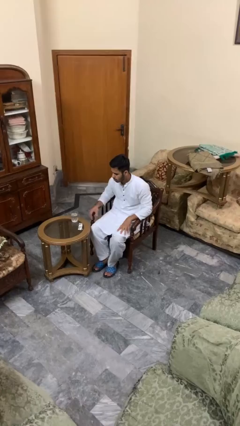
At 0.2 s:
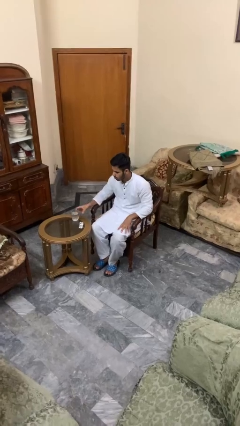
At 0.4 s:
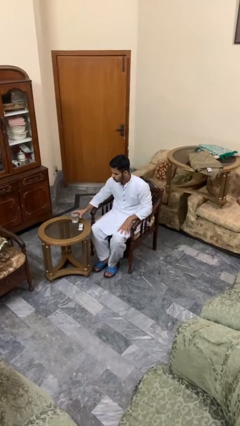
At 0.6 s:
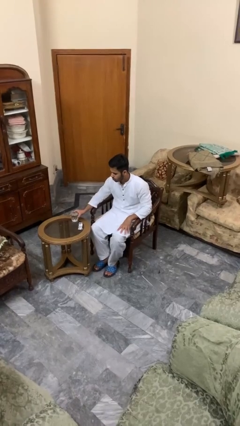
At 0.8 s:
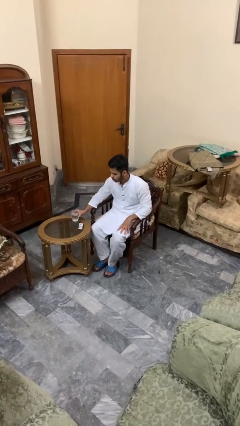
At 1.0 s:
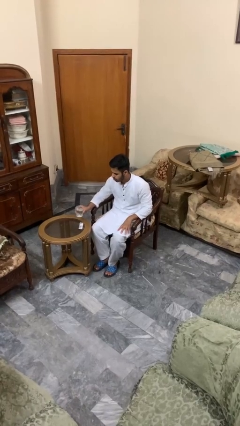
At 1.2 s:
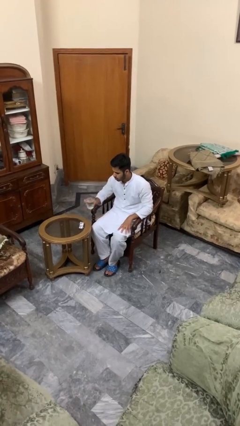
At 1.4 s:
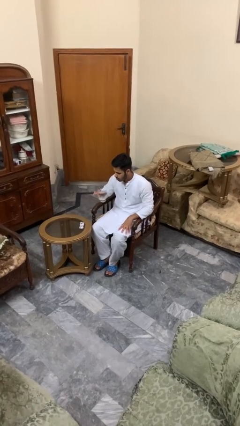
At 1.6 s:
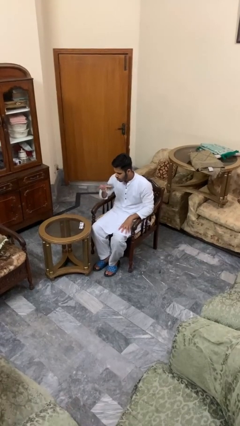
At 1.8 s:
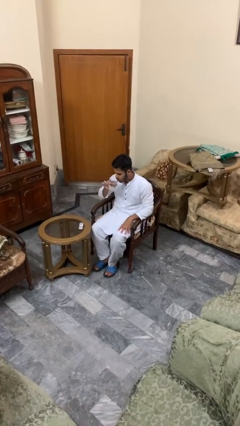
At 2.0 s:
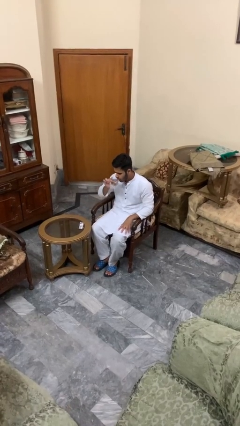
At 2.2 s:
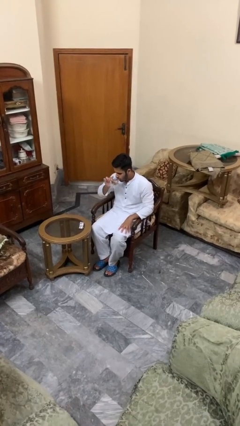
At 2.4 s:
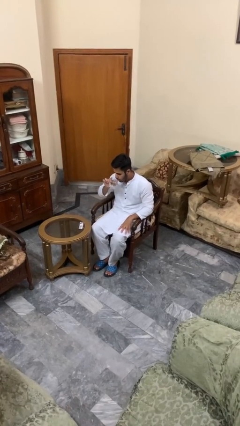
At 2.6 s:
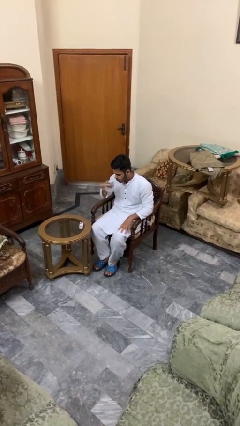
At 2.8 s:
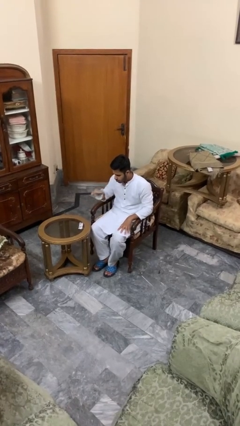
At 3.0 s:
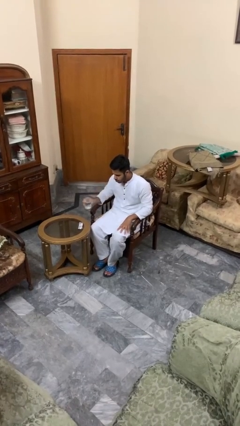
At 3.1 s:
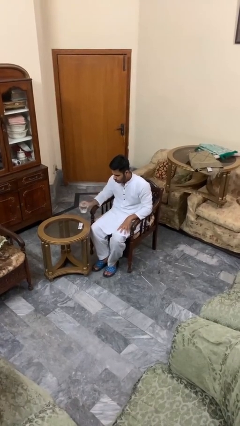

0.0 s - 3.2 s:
person drinks from cup

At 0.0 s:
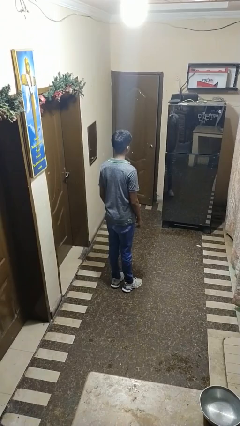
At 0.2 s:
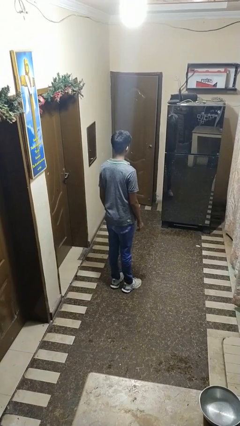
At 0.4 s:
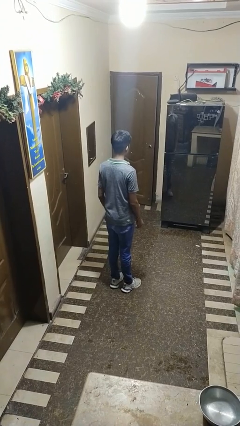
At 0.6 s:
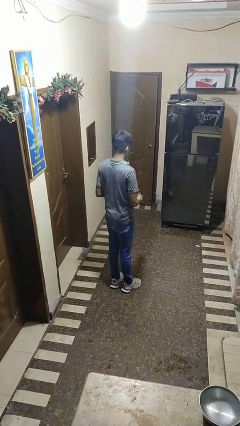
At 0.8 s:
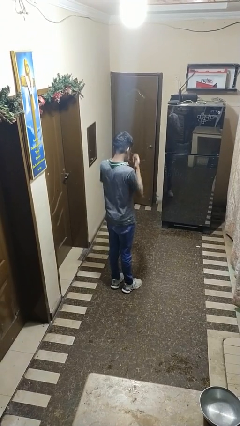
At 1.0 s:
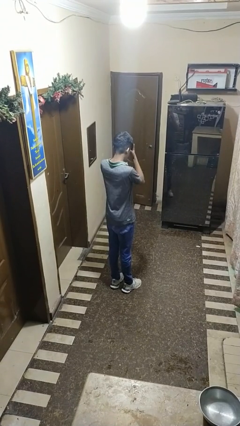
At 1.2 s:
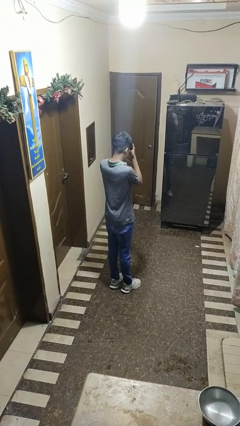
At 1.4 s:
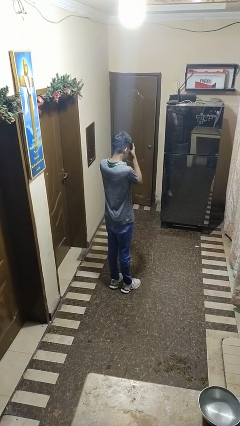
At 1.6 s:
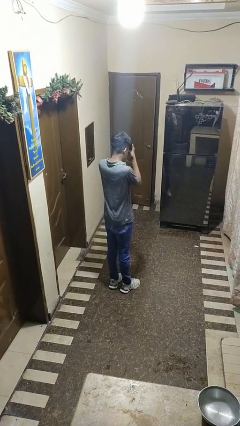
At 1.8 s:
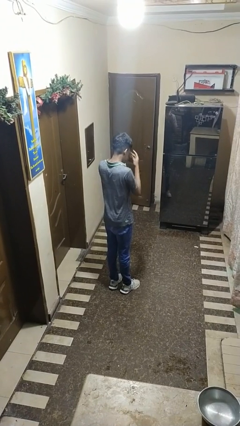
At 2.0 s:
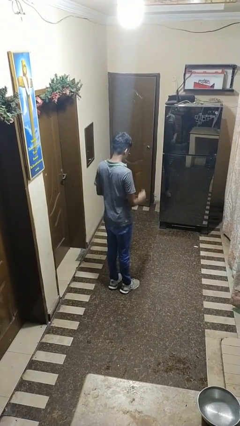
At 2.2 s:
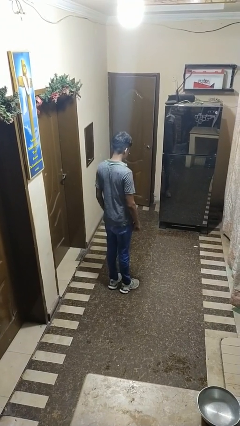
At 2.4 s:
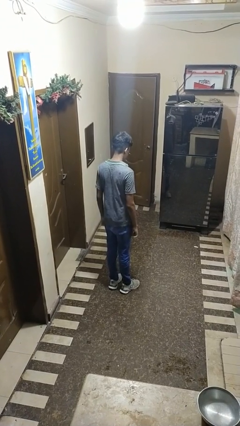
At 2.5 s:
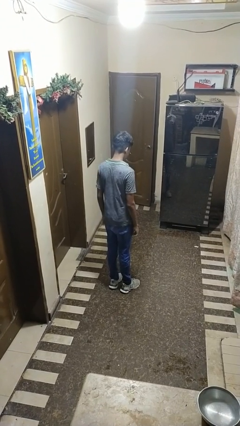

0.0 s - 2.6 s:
person rubs eyes

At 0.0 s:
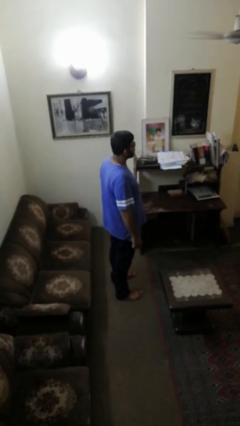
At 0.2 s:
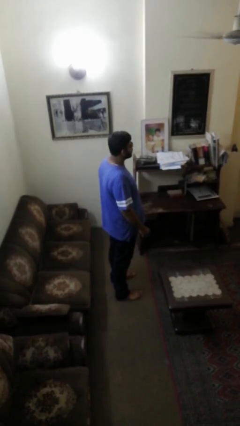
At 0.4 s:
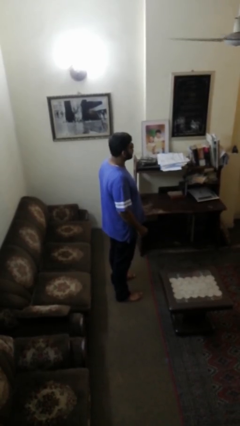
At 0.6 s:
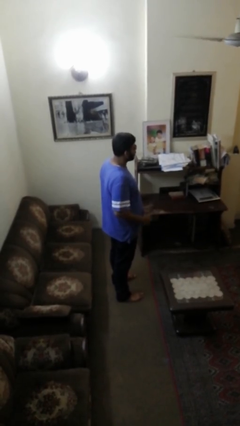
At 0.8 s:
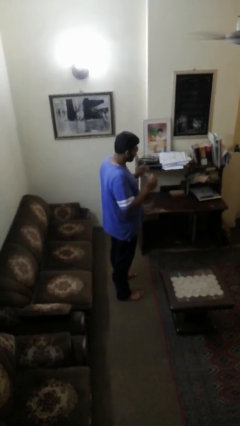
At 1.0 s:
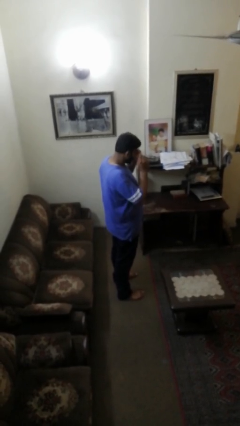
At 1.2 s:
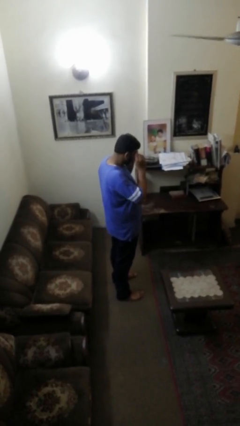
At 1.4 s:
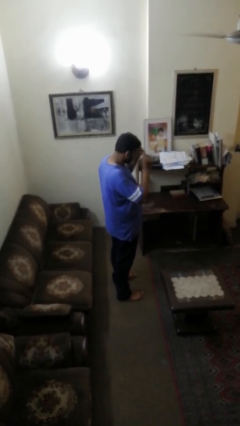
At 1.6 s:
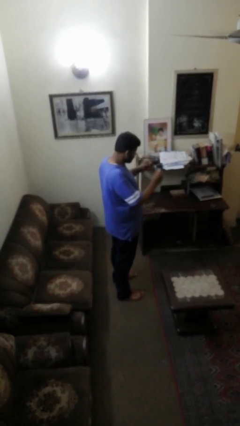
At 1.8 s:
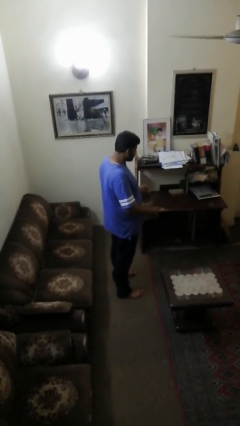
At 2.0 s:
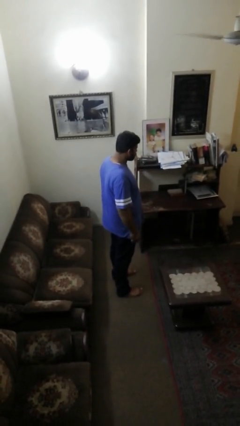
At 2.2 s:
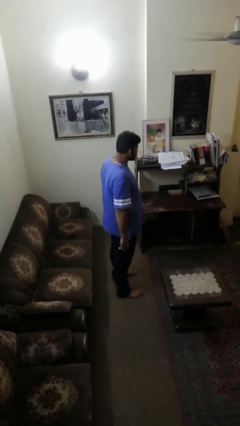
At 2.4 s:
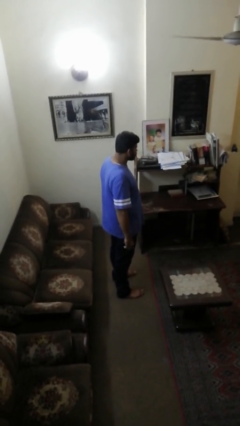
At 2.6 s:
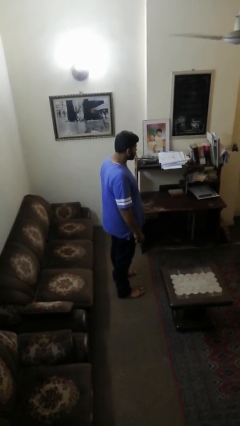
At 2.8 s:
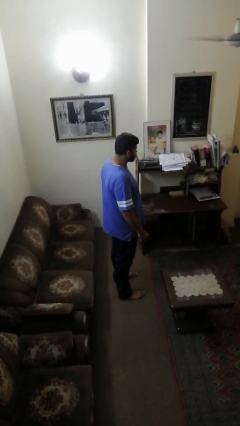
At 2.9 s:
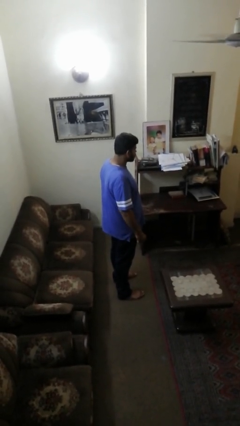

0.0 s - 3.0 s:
person takes off sunglasses

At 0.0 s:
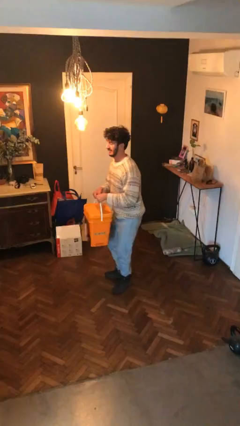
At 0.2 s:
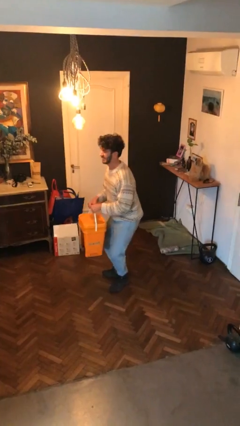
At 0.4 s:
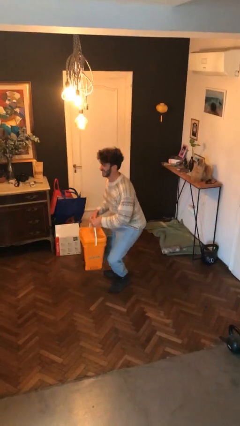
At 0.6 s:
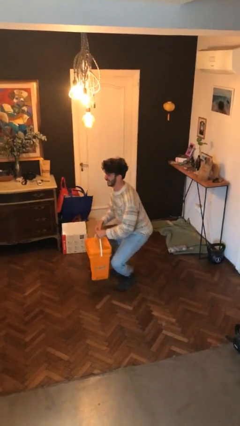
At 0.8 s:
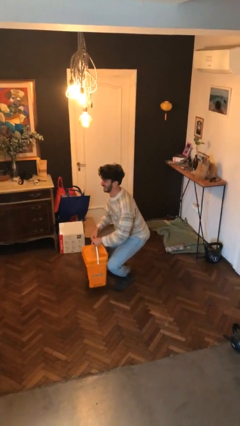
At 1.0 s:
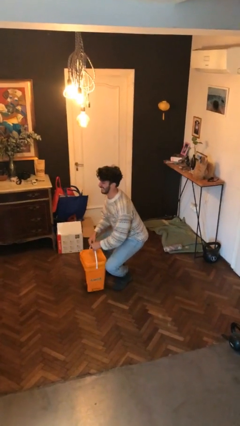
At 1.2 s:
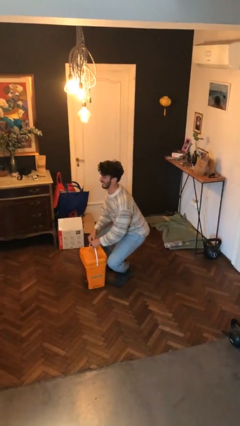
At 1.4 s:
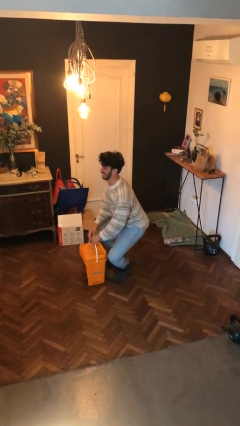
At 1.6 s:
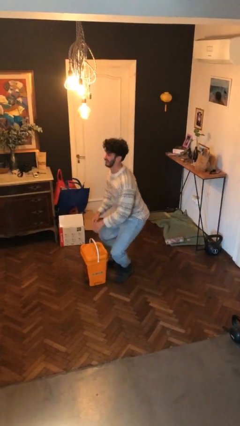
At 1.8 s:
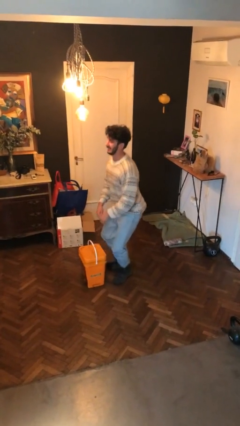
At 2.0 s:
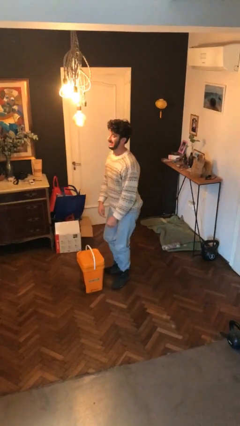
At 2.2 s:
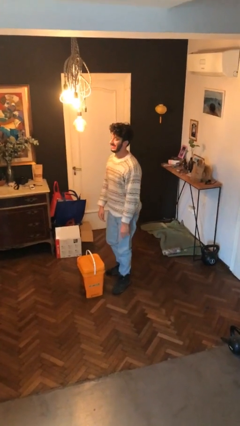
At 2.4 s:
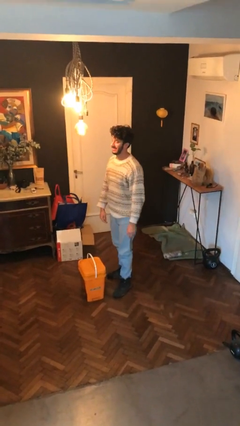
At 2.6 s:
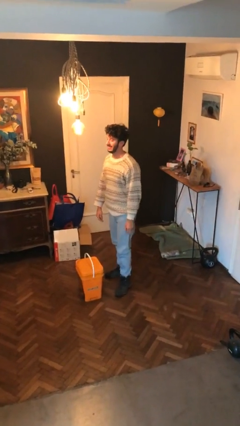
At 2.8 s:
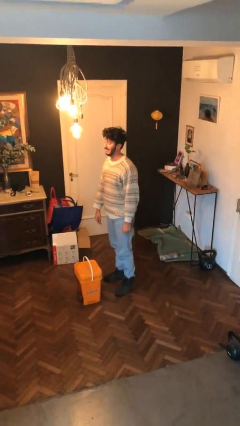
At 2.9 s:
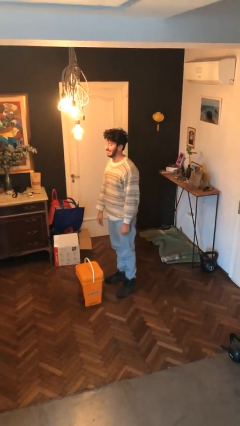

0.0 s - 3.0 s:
person puts down object on floor

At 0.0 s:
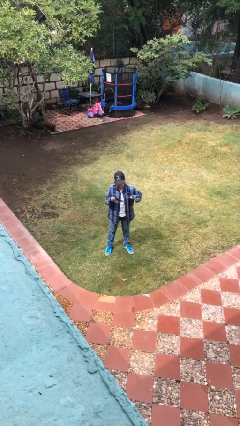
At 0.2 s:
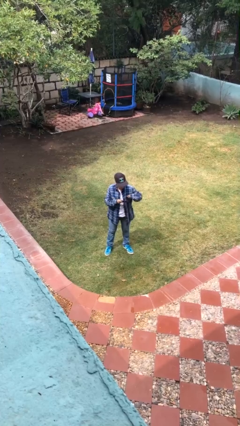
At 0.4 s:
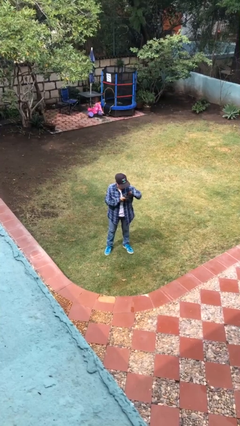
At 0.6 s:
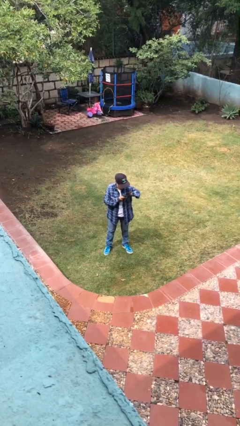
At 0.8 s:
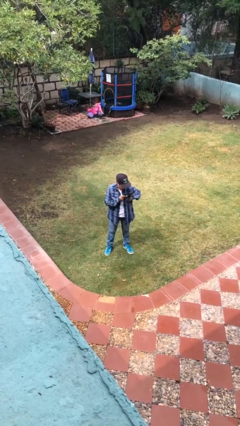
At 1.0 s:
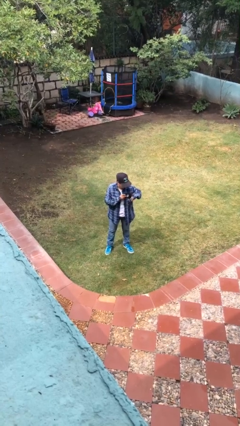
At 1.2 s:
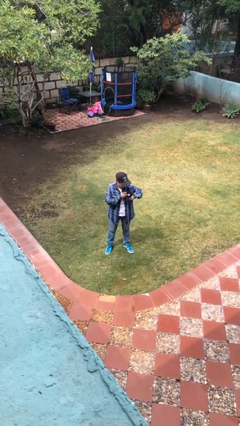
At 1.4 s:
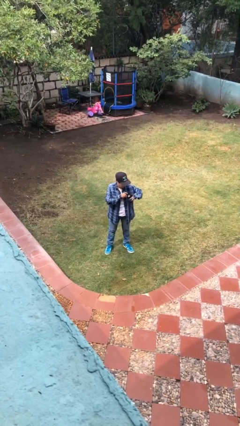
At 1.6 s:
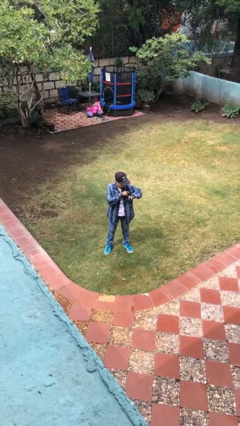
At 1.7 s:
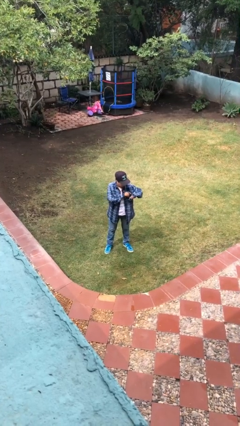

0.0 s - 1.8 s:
person puts phone into pocket

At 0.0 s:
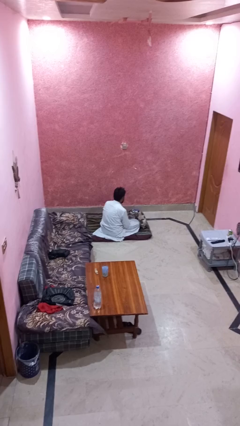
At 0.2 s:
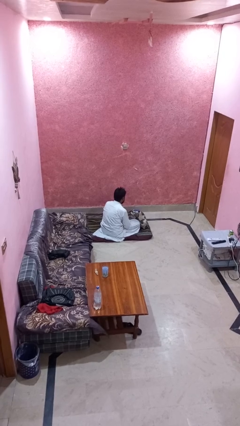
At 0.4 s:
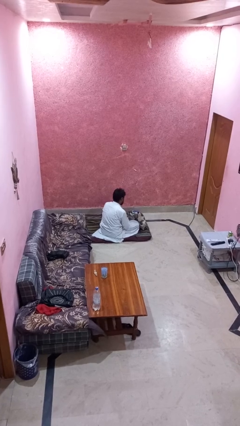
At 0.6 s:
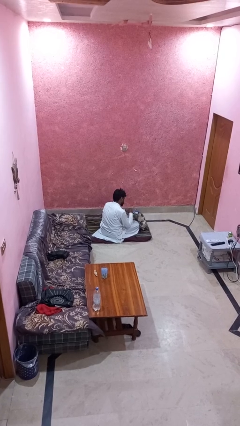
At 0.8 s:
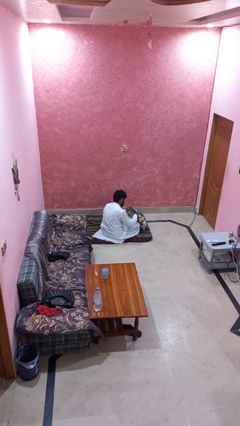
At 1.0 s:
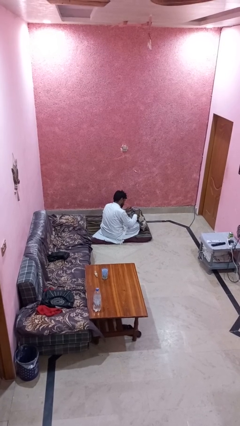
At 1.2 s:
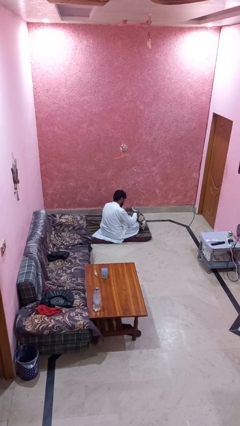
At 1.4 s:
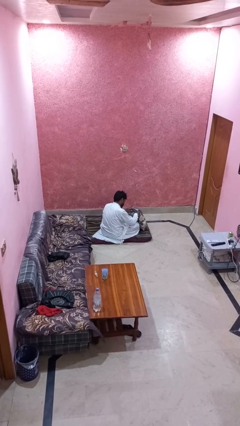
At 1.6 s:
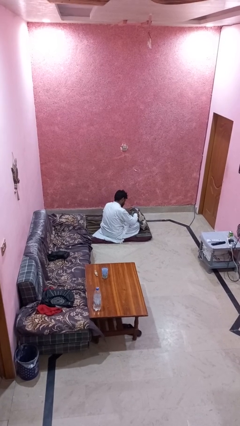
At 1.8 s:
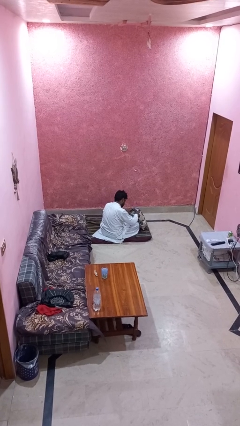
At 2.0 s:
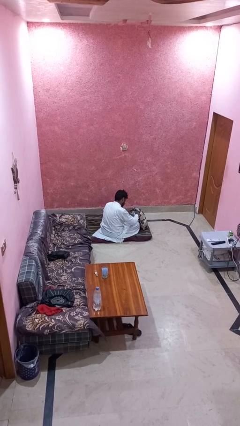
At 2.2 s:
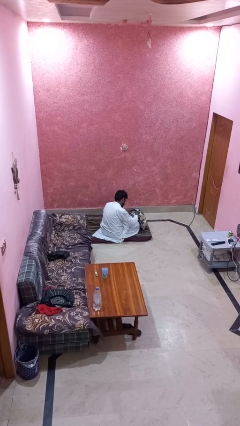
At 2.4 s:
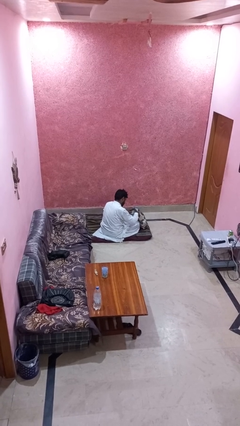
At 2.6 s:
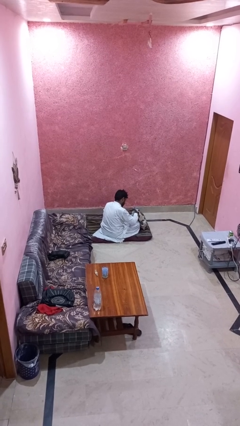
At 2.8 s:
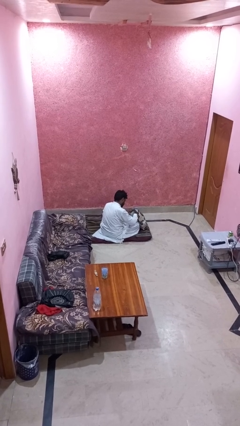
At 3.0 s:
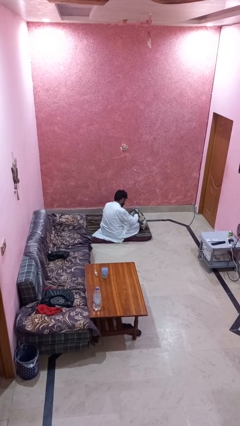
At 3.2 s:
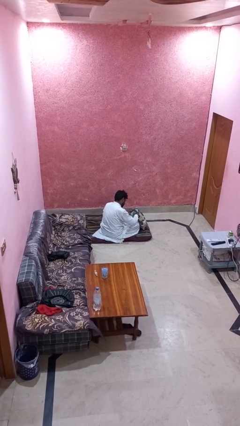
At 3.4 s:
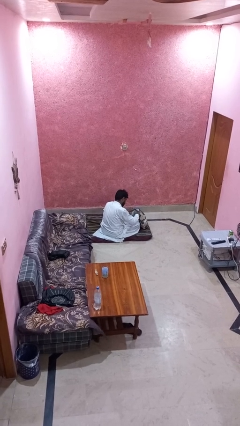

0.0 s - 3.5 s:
person searches in backpack

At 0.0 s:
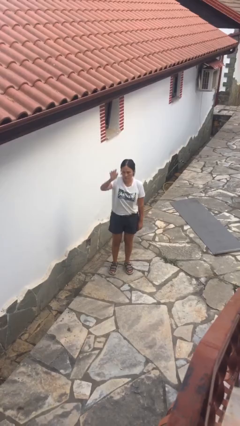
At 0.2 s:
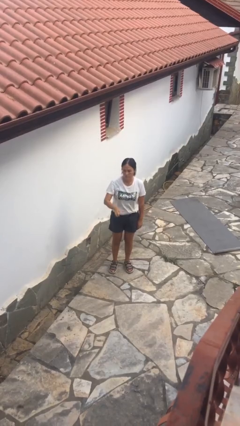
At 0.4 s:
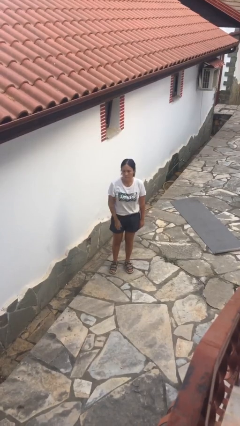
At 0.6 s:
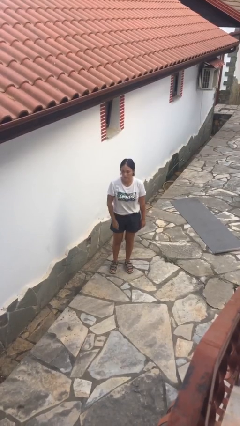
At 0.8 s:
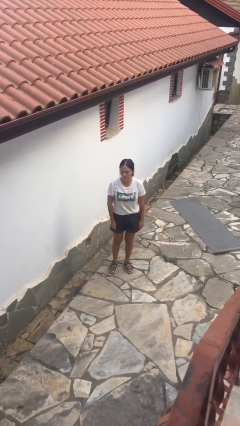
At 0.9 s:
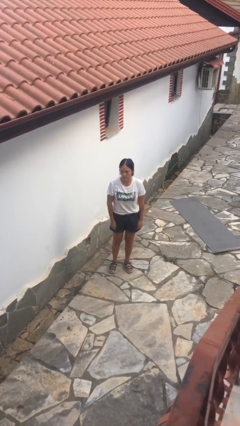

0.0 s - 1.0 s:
person gestures swipe down
